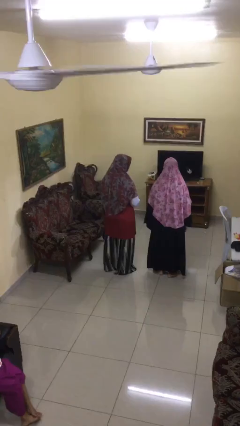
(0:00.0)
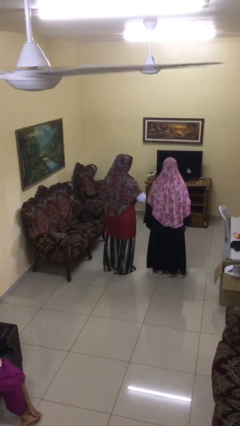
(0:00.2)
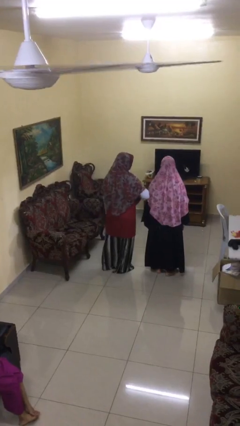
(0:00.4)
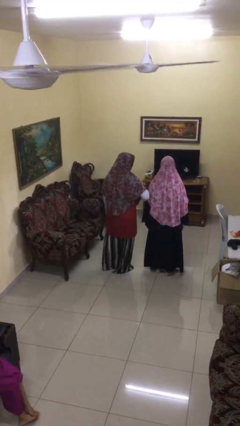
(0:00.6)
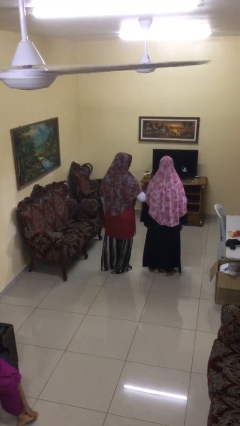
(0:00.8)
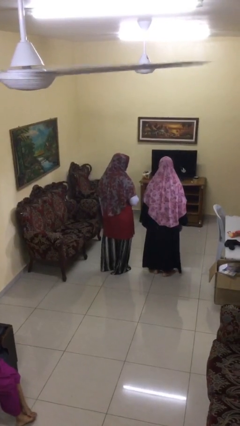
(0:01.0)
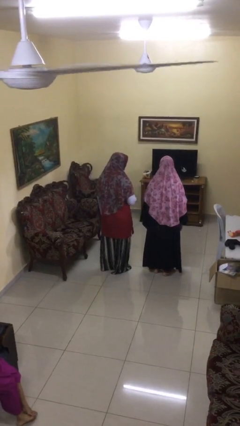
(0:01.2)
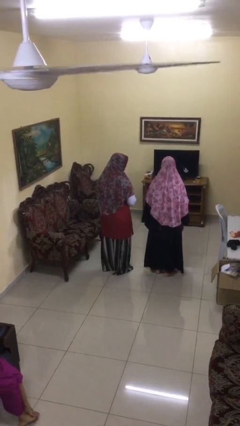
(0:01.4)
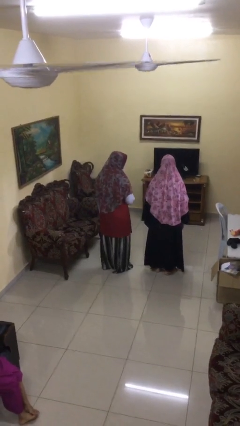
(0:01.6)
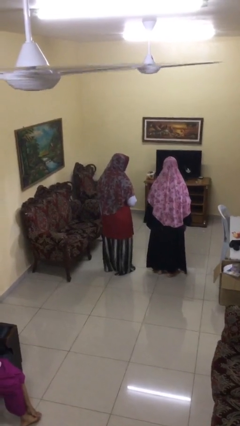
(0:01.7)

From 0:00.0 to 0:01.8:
person nudges person with elbow

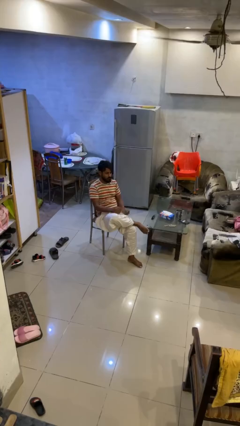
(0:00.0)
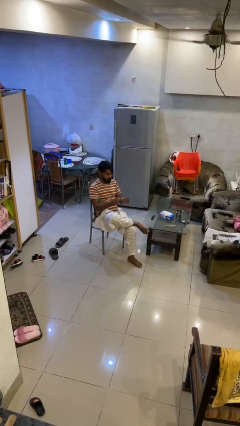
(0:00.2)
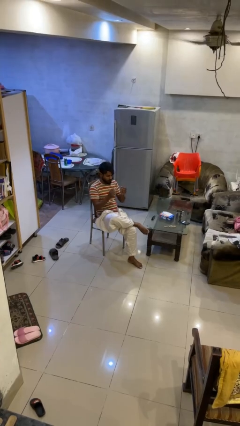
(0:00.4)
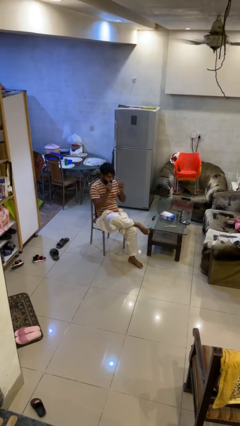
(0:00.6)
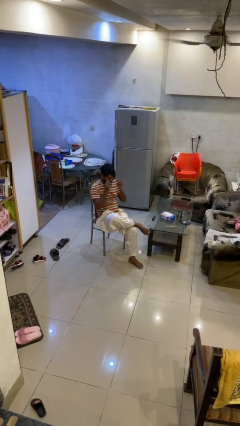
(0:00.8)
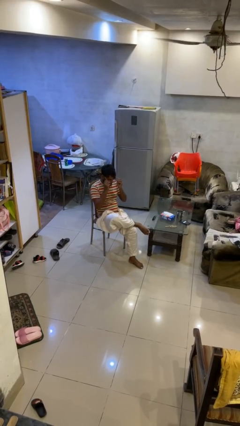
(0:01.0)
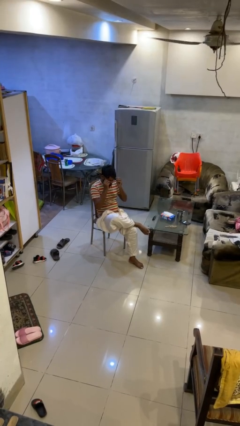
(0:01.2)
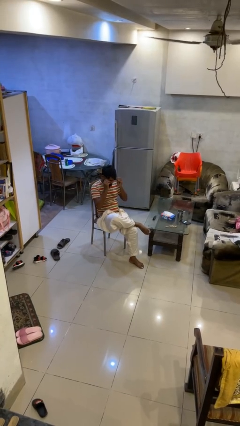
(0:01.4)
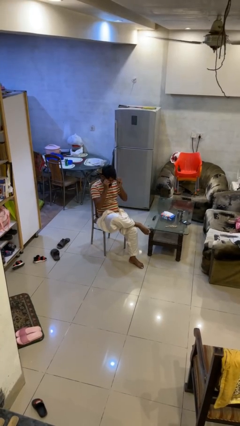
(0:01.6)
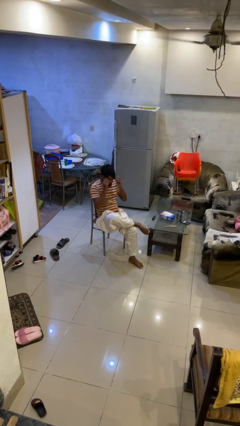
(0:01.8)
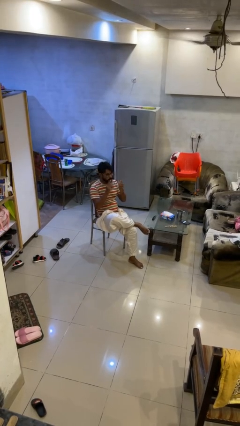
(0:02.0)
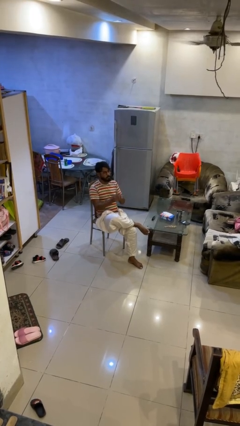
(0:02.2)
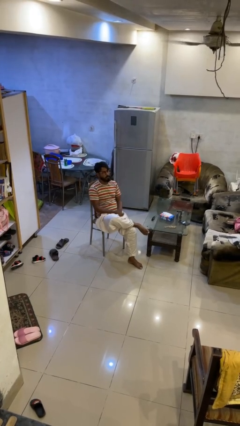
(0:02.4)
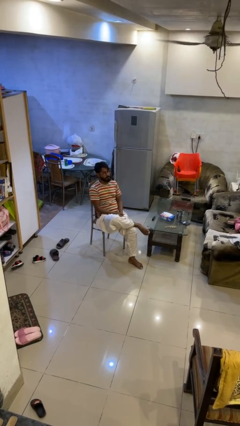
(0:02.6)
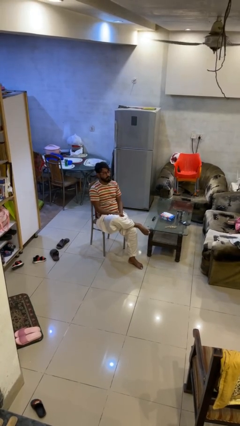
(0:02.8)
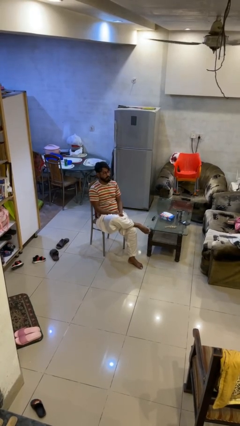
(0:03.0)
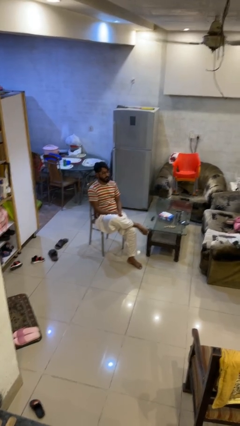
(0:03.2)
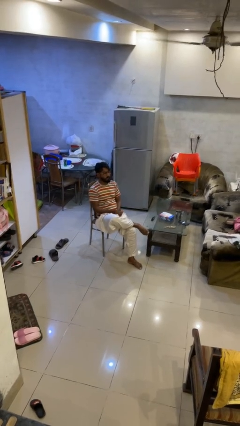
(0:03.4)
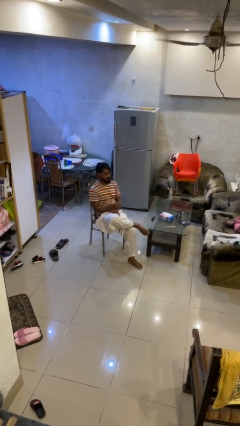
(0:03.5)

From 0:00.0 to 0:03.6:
person puts on glasses

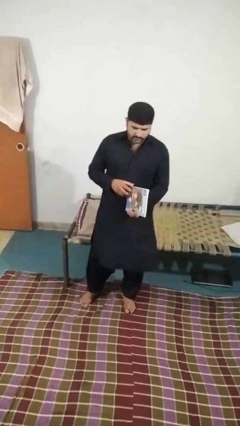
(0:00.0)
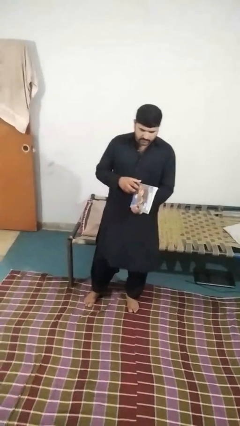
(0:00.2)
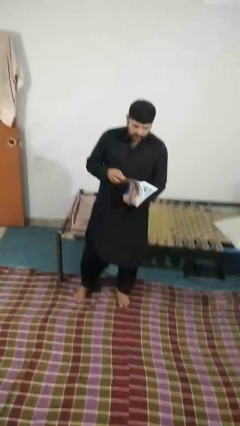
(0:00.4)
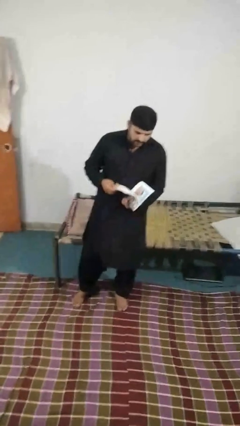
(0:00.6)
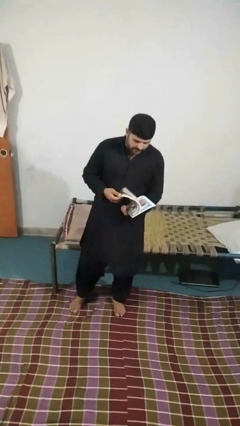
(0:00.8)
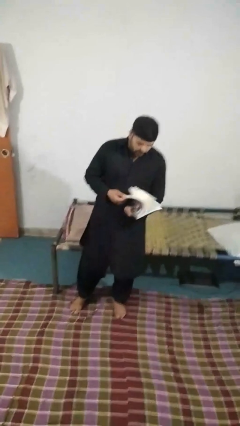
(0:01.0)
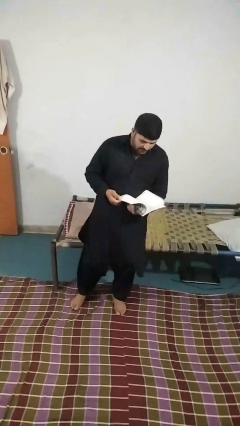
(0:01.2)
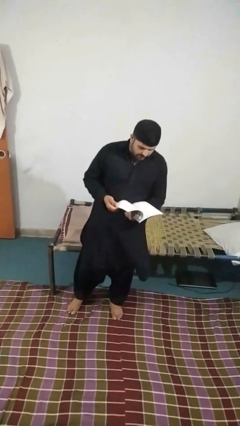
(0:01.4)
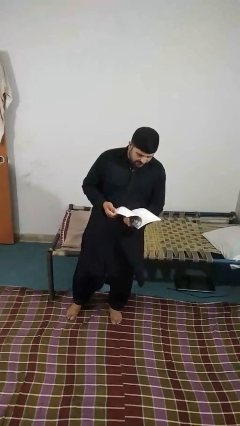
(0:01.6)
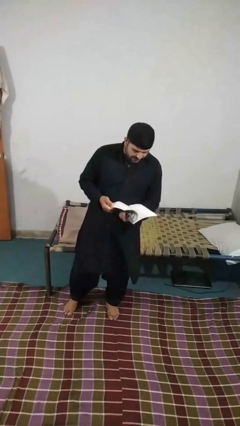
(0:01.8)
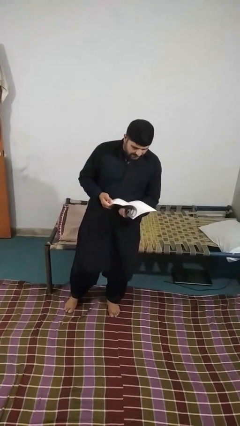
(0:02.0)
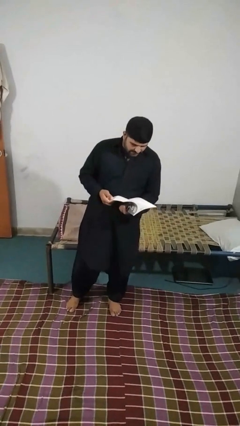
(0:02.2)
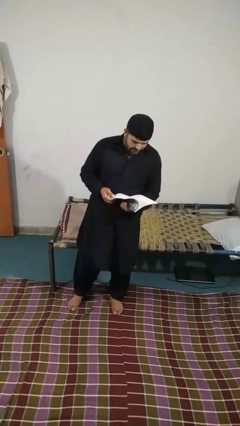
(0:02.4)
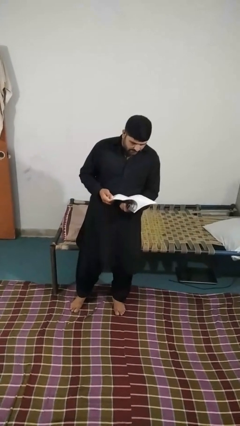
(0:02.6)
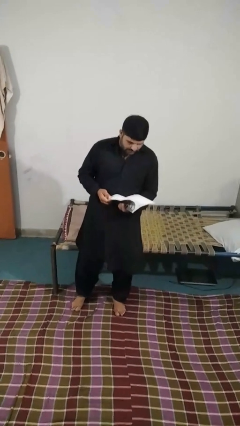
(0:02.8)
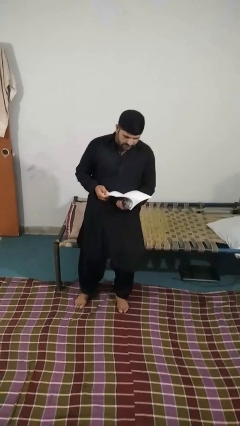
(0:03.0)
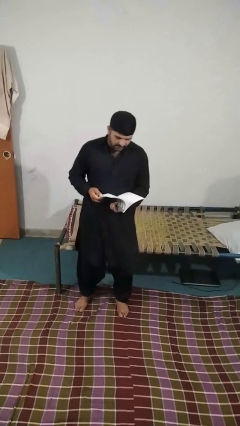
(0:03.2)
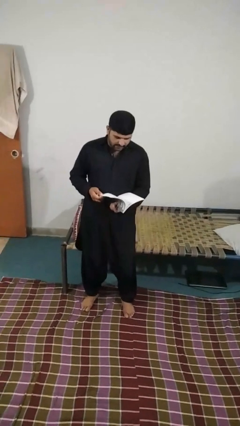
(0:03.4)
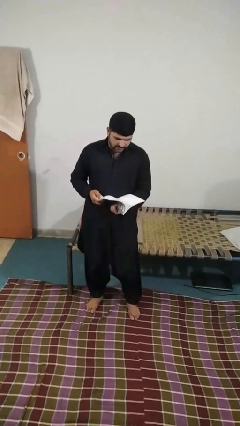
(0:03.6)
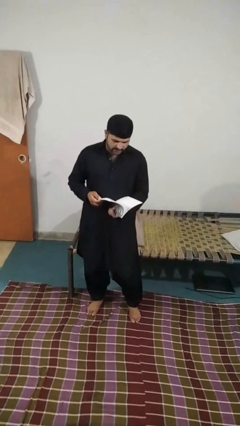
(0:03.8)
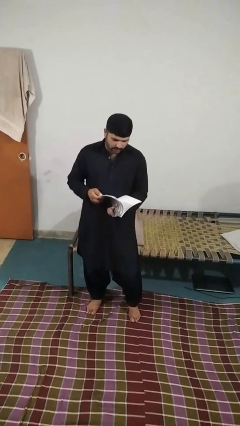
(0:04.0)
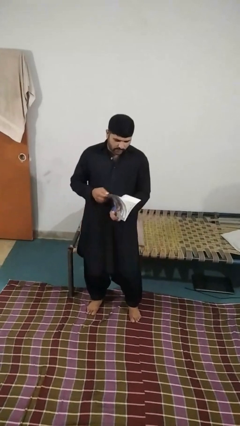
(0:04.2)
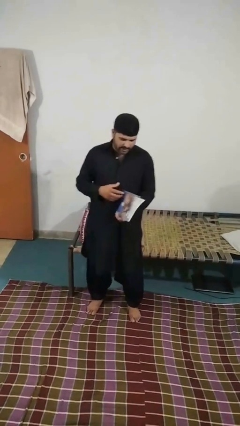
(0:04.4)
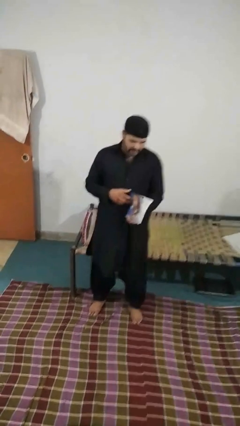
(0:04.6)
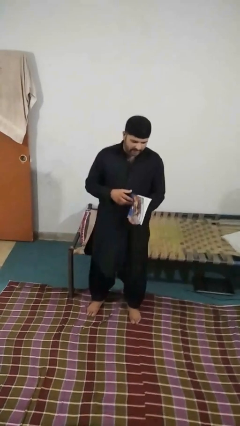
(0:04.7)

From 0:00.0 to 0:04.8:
person reads magazine

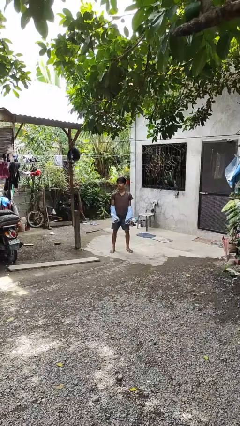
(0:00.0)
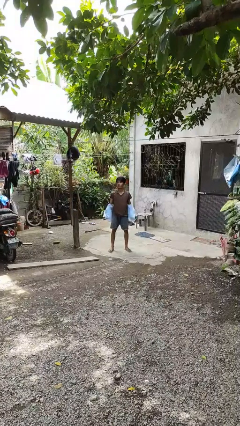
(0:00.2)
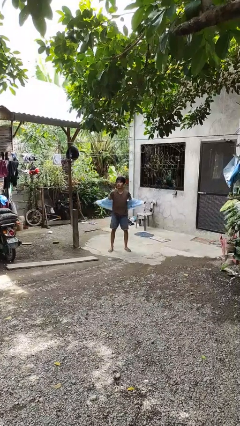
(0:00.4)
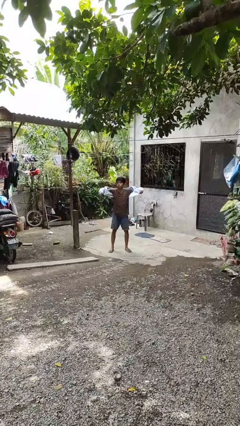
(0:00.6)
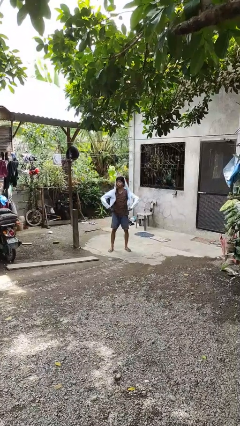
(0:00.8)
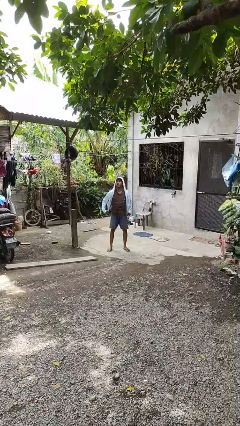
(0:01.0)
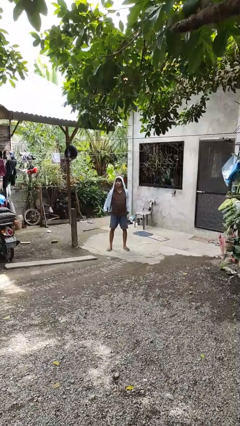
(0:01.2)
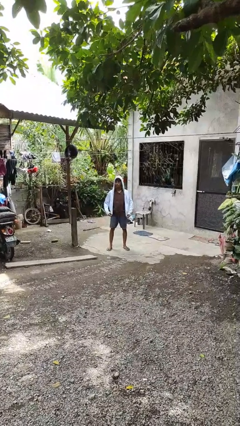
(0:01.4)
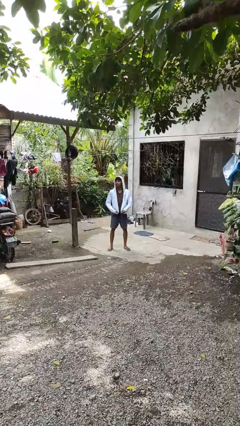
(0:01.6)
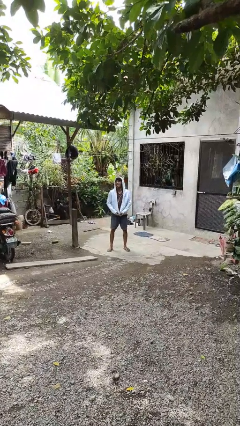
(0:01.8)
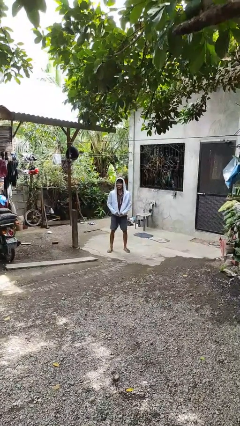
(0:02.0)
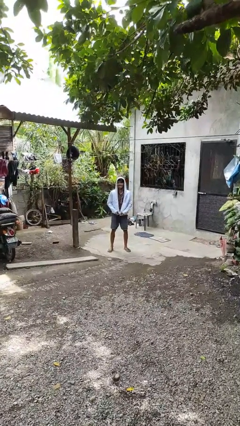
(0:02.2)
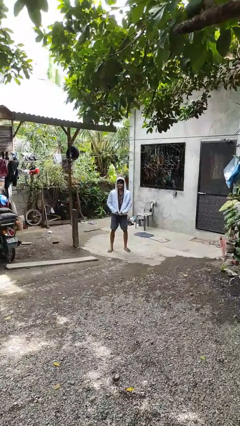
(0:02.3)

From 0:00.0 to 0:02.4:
person puts on jacket

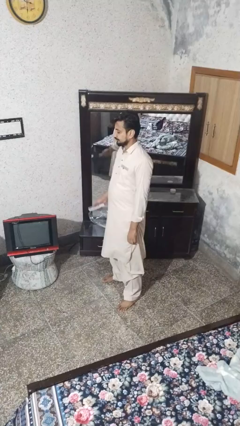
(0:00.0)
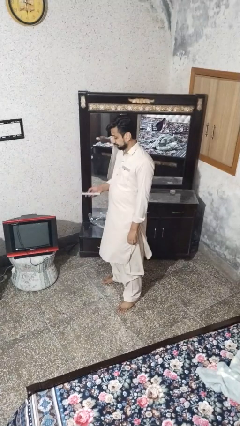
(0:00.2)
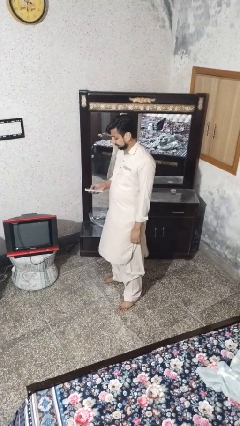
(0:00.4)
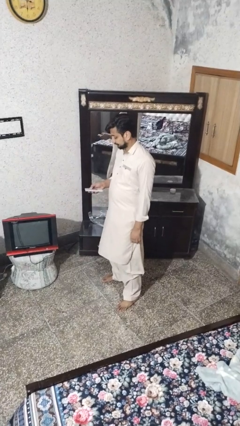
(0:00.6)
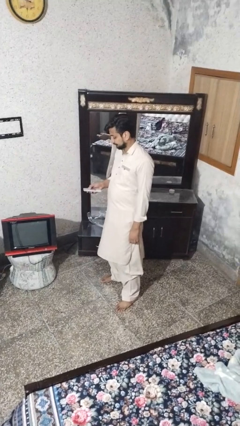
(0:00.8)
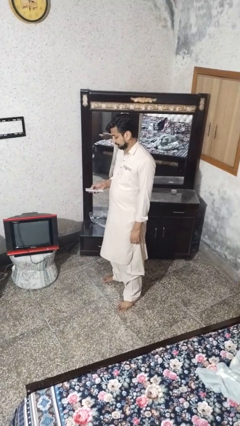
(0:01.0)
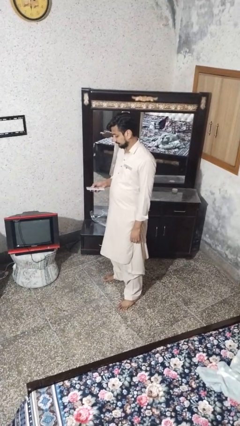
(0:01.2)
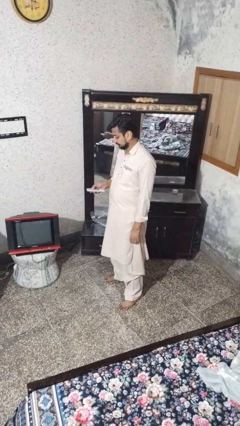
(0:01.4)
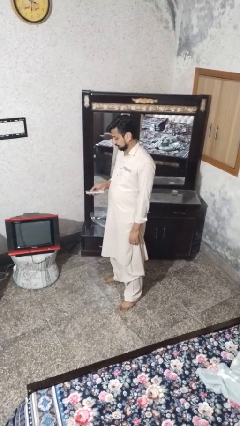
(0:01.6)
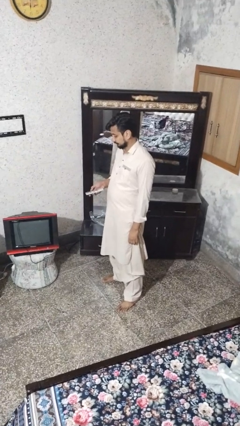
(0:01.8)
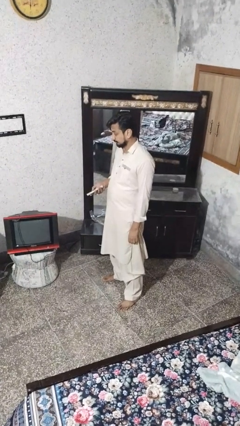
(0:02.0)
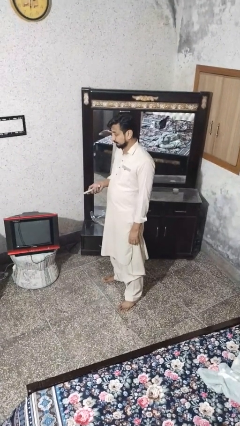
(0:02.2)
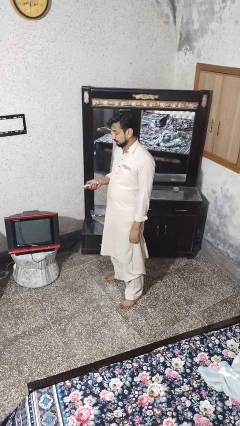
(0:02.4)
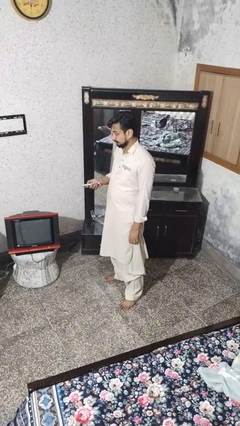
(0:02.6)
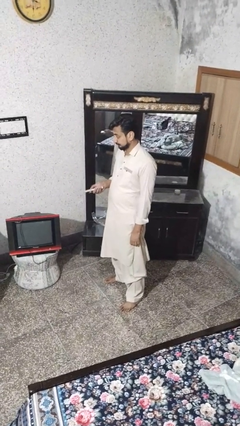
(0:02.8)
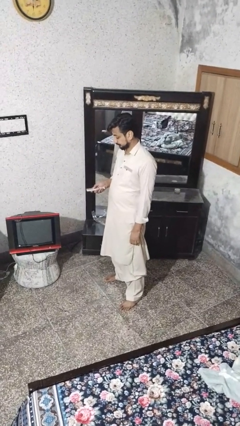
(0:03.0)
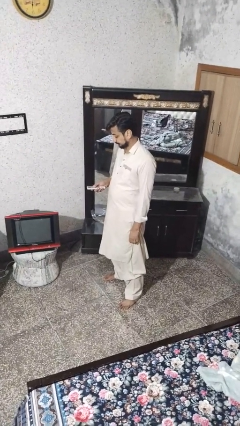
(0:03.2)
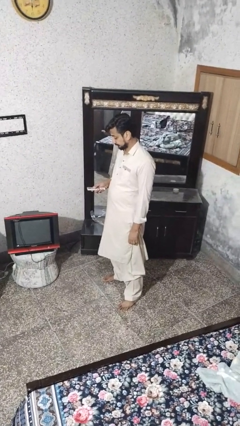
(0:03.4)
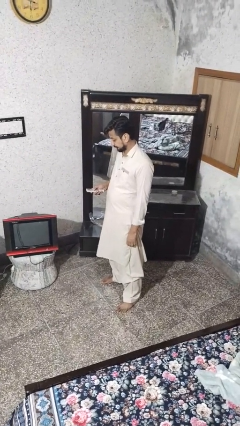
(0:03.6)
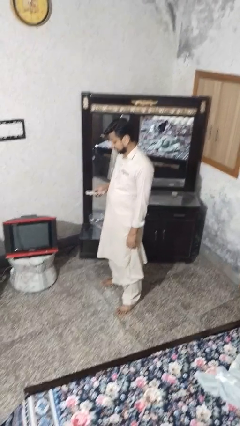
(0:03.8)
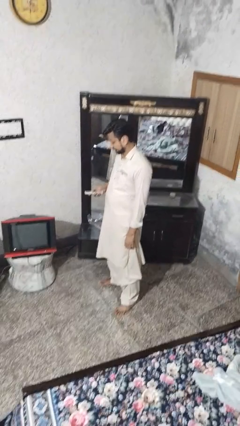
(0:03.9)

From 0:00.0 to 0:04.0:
person uses television remote

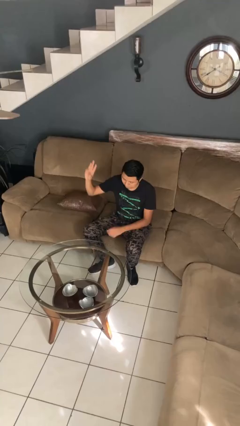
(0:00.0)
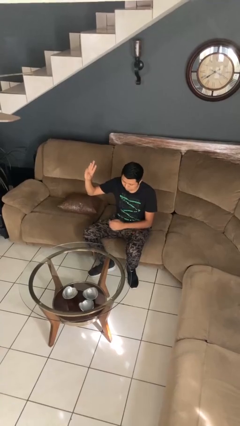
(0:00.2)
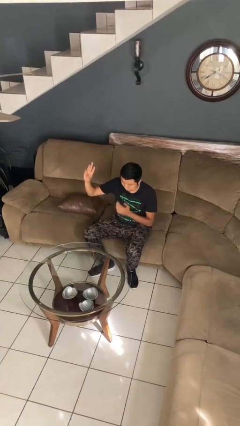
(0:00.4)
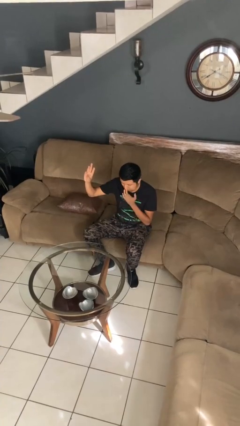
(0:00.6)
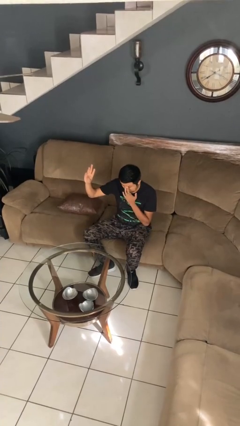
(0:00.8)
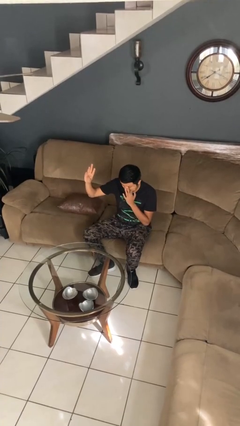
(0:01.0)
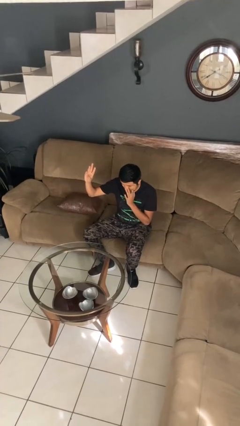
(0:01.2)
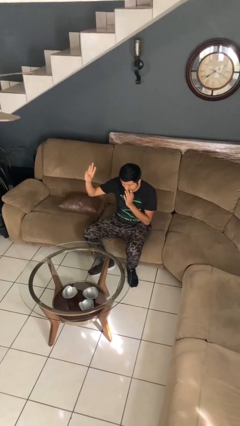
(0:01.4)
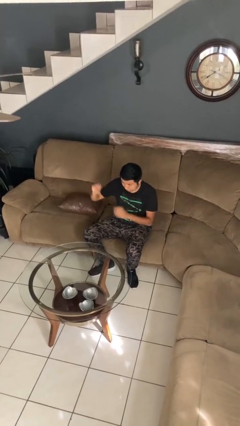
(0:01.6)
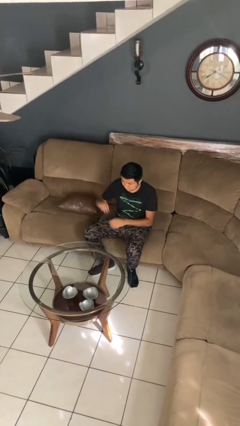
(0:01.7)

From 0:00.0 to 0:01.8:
person gestures number three
